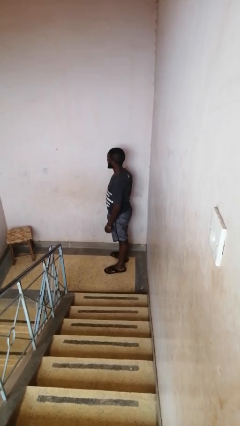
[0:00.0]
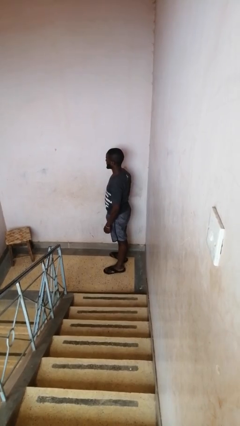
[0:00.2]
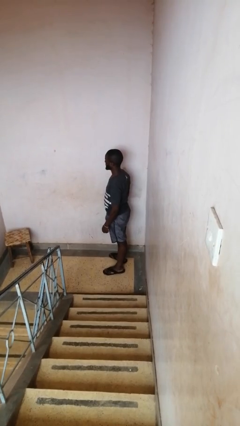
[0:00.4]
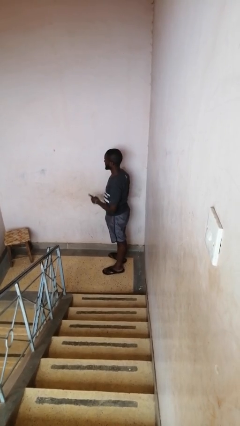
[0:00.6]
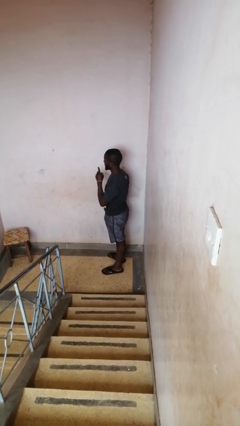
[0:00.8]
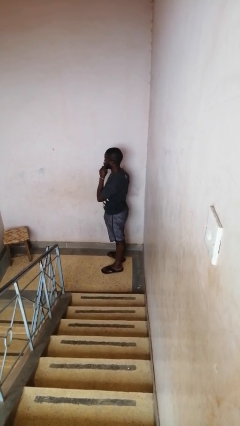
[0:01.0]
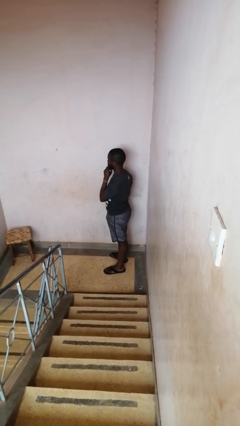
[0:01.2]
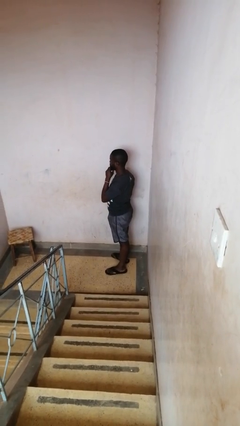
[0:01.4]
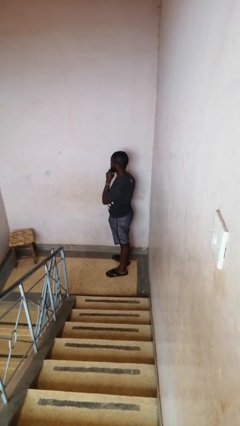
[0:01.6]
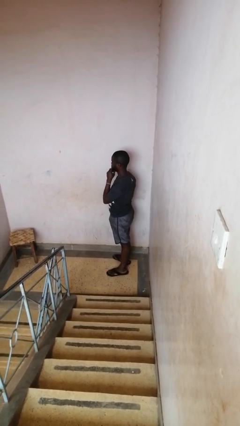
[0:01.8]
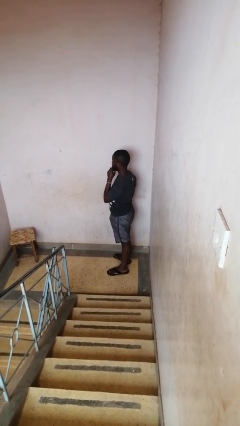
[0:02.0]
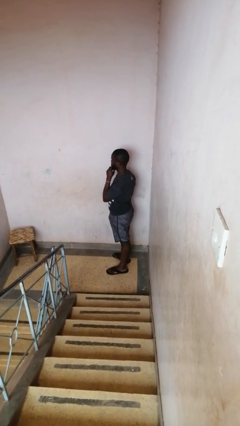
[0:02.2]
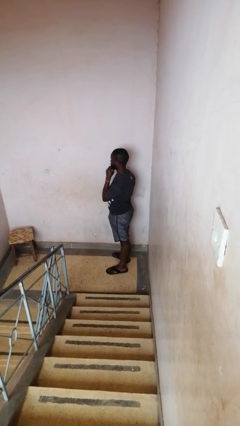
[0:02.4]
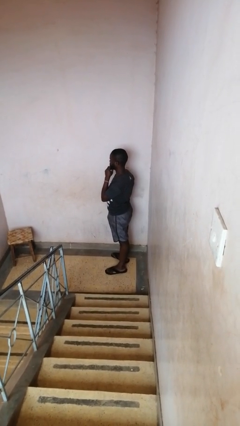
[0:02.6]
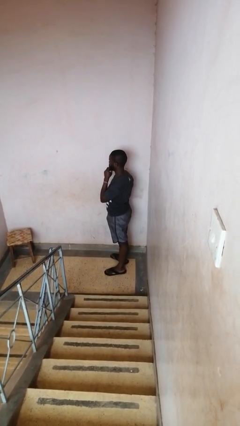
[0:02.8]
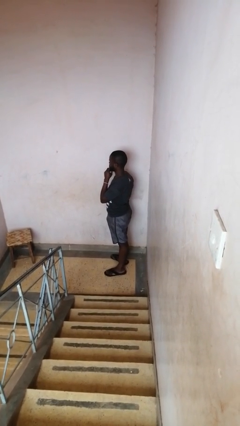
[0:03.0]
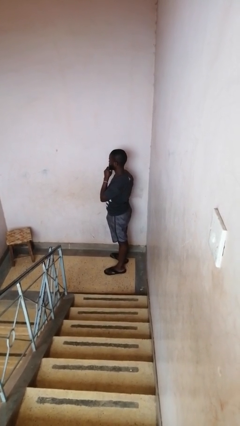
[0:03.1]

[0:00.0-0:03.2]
person gestures be quiet

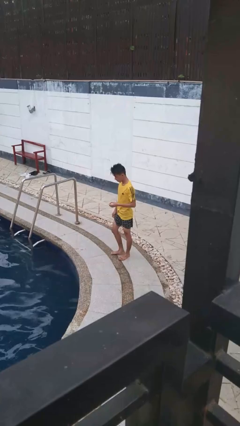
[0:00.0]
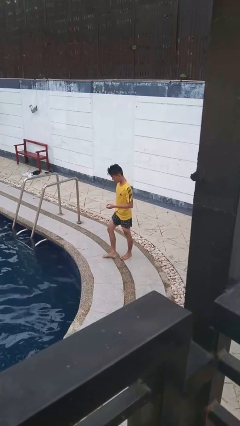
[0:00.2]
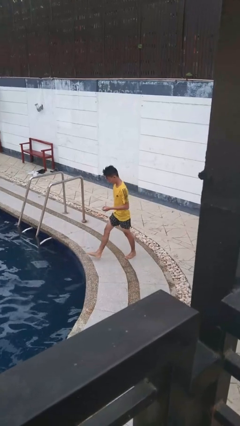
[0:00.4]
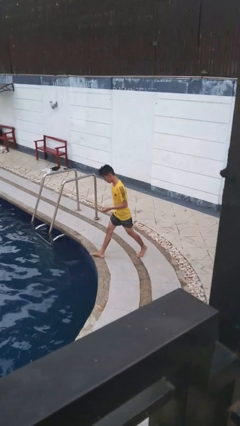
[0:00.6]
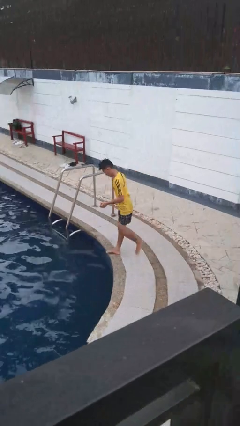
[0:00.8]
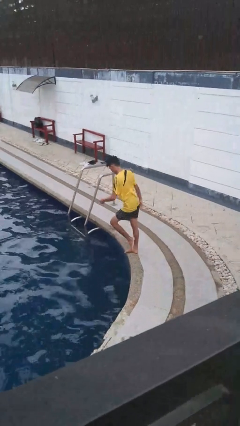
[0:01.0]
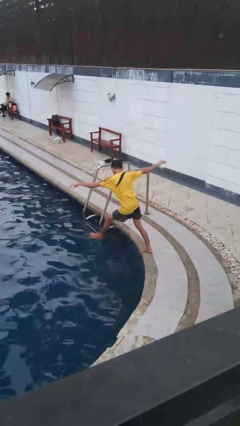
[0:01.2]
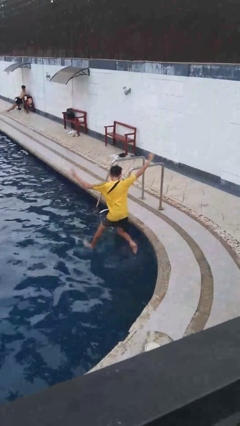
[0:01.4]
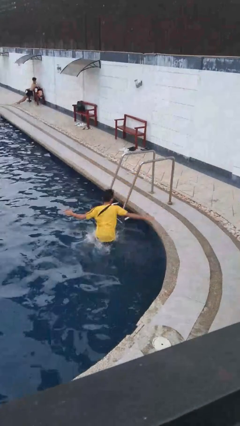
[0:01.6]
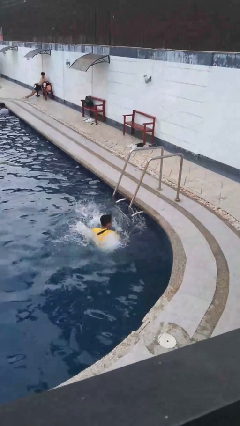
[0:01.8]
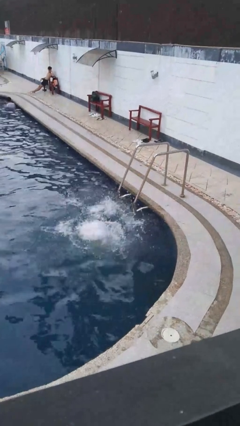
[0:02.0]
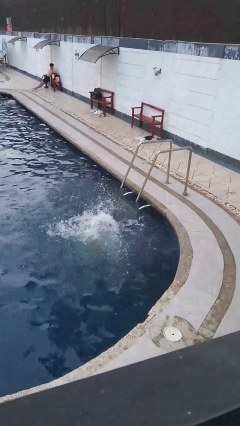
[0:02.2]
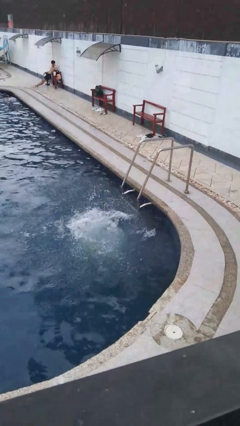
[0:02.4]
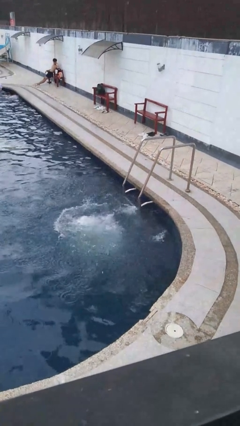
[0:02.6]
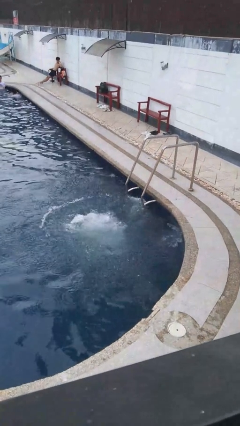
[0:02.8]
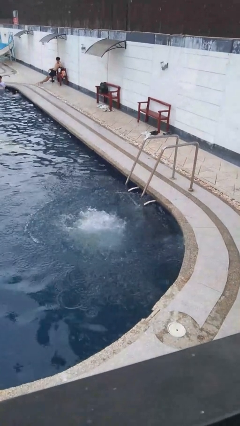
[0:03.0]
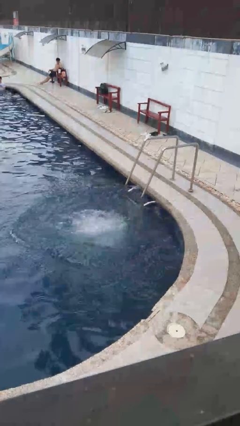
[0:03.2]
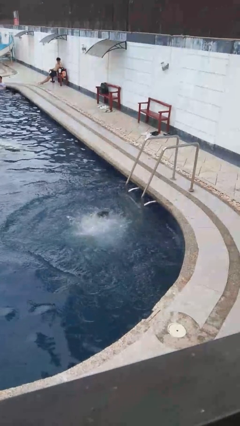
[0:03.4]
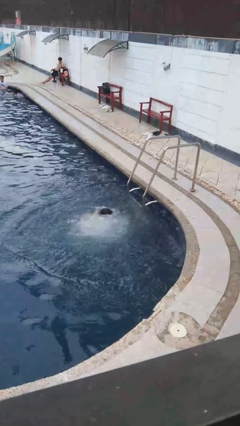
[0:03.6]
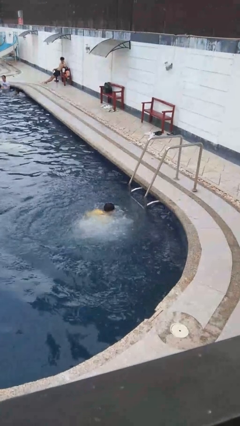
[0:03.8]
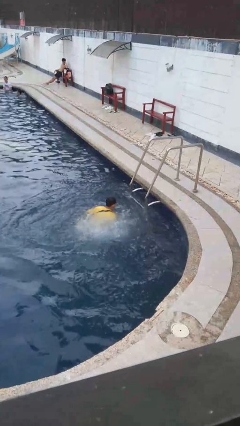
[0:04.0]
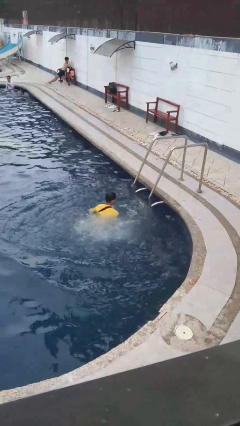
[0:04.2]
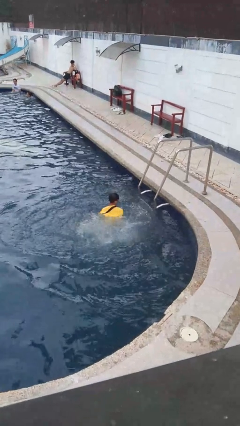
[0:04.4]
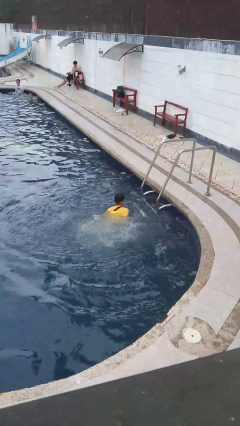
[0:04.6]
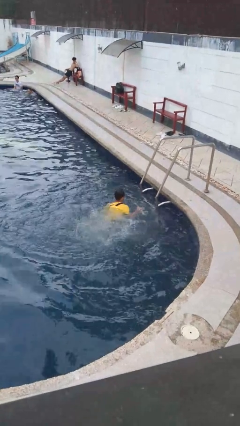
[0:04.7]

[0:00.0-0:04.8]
person falls into pool

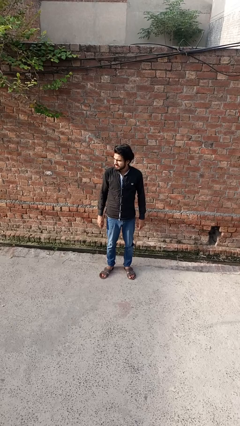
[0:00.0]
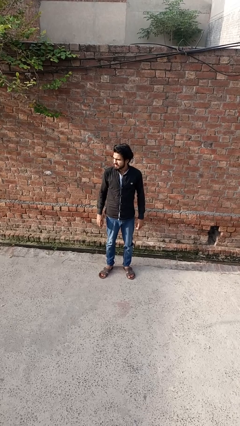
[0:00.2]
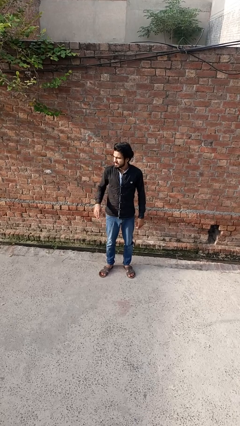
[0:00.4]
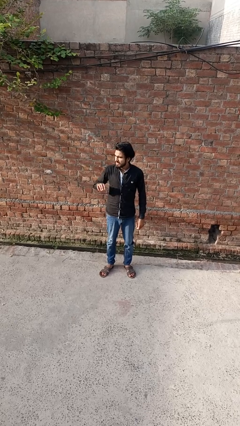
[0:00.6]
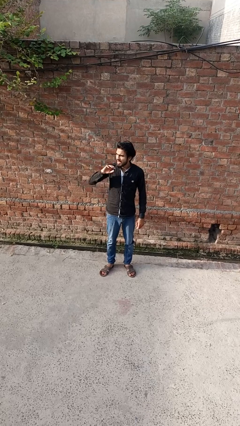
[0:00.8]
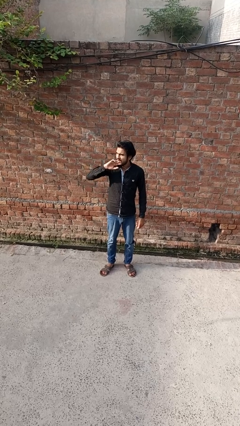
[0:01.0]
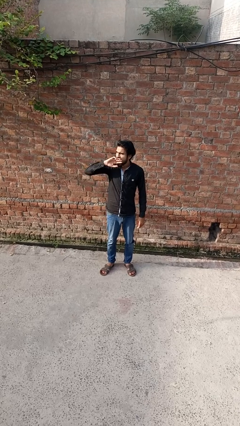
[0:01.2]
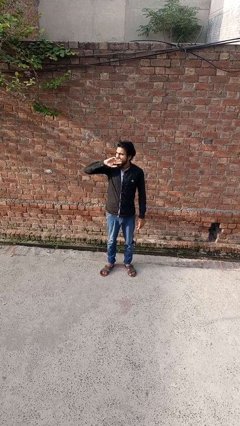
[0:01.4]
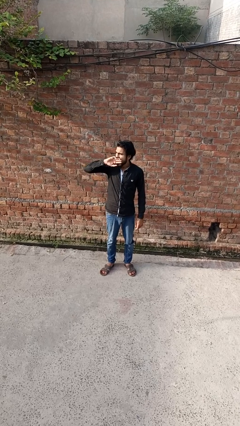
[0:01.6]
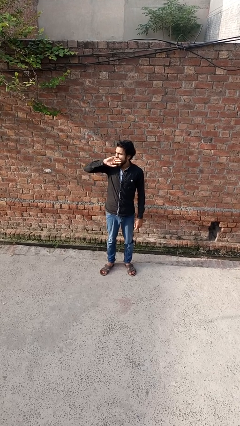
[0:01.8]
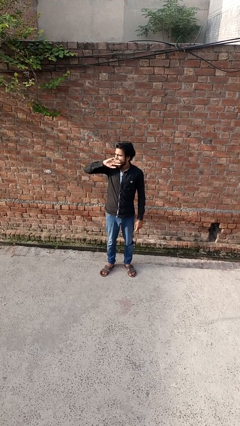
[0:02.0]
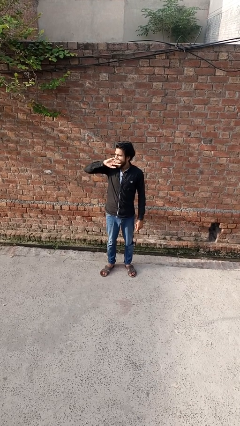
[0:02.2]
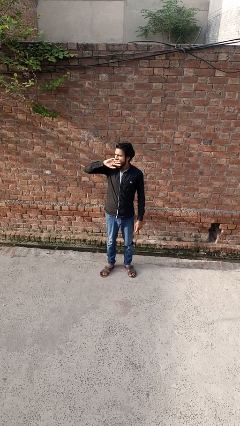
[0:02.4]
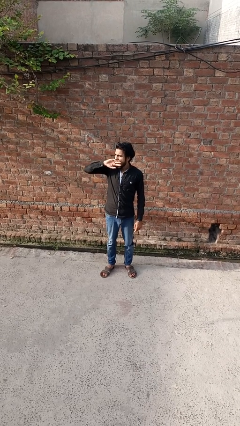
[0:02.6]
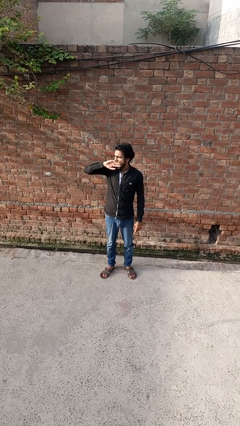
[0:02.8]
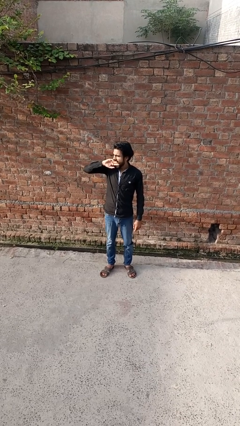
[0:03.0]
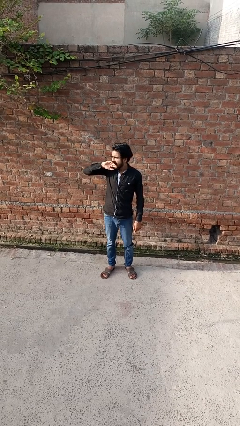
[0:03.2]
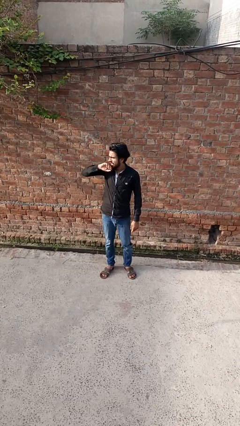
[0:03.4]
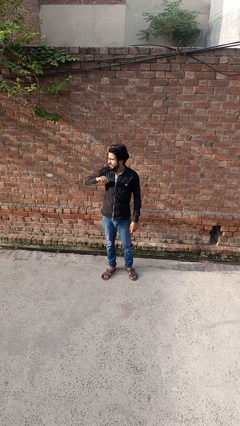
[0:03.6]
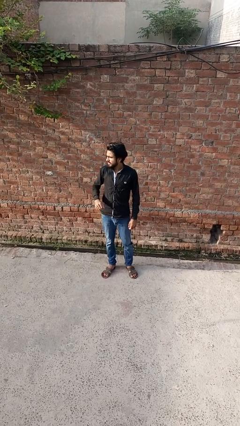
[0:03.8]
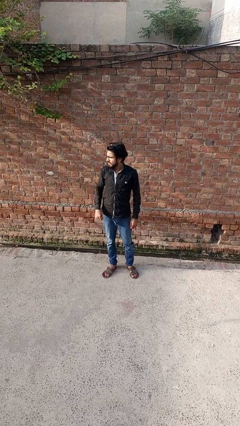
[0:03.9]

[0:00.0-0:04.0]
person yawns

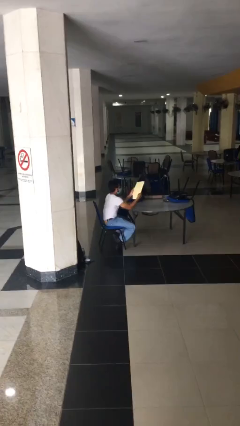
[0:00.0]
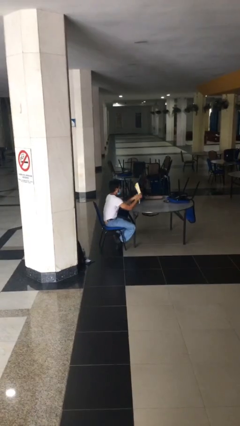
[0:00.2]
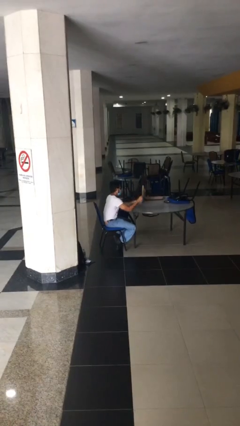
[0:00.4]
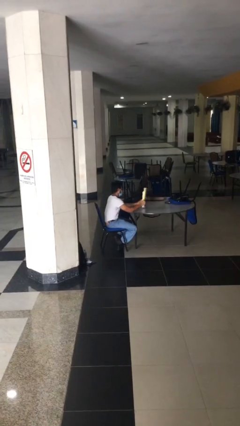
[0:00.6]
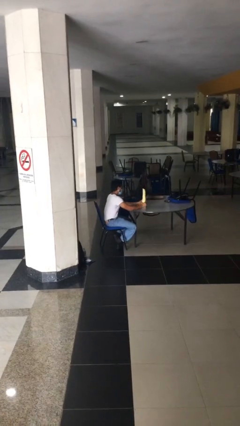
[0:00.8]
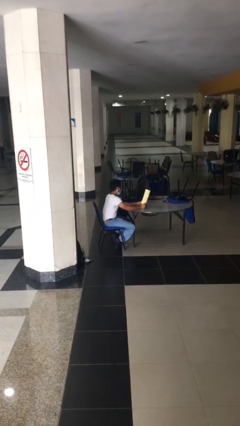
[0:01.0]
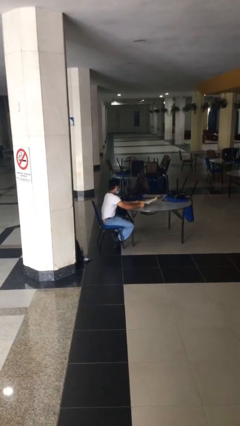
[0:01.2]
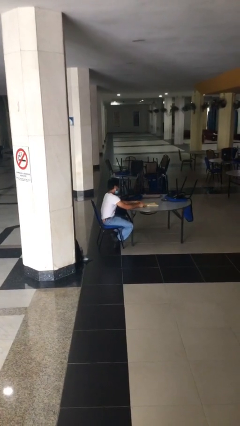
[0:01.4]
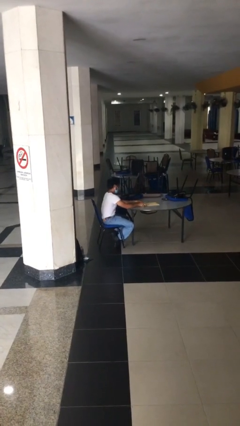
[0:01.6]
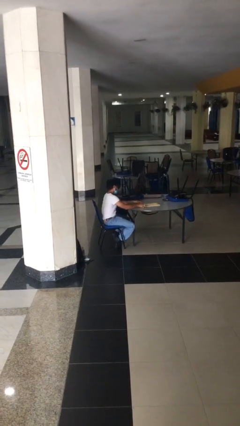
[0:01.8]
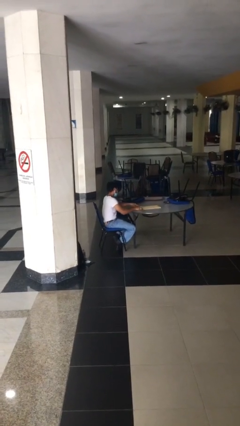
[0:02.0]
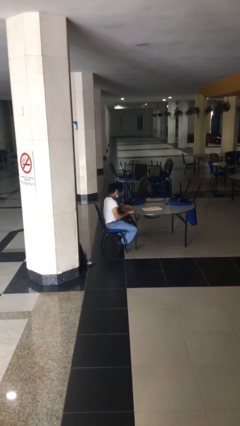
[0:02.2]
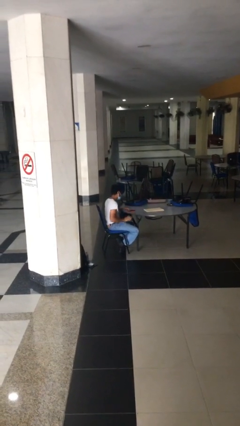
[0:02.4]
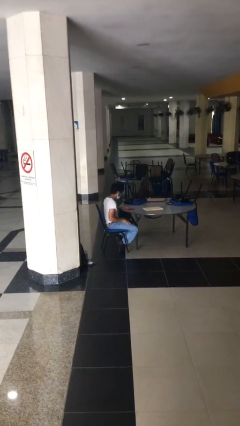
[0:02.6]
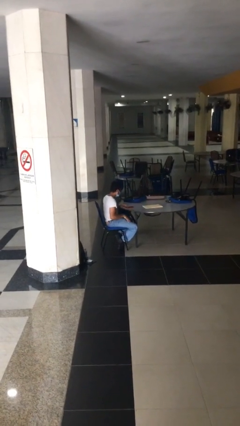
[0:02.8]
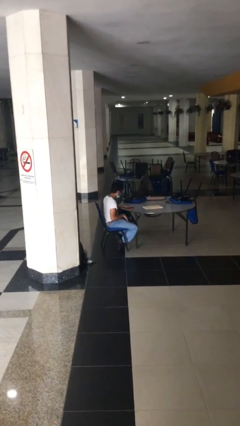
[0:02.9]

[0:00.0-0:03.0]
person puts down object on table

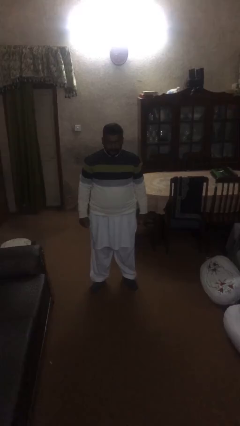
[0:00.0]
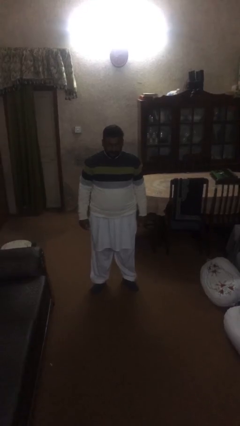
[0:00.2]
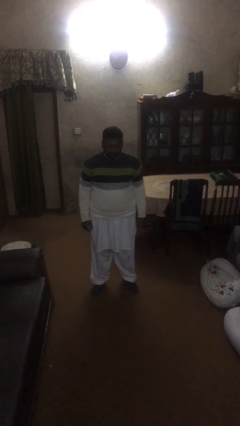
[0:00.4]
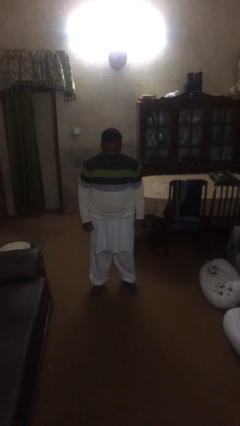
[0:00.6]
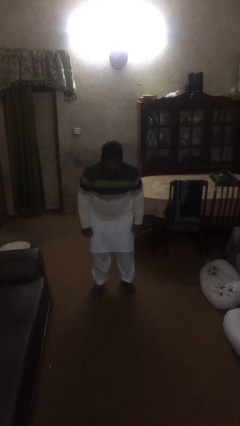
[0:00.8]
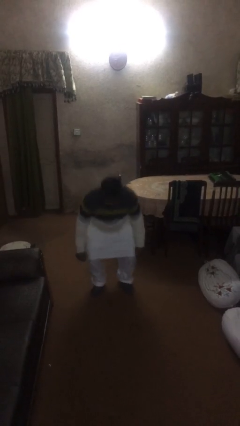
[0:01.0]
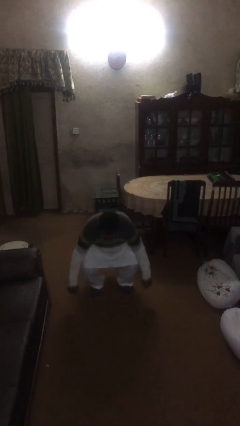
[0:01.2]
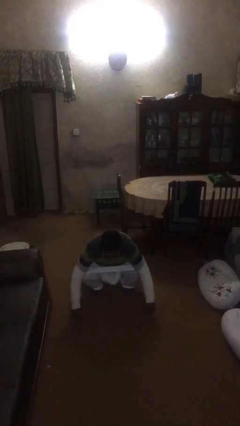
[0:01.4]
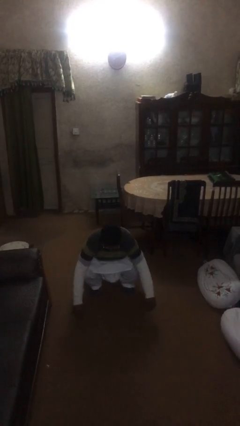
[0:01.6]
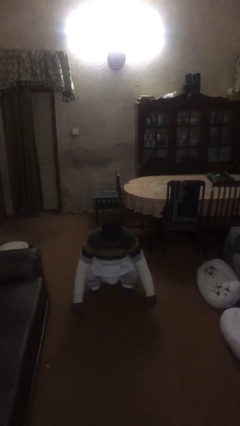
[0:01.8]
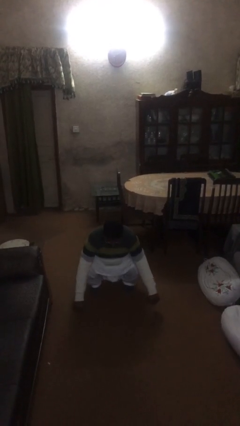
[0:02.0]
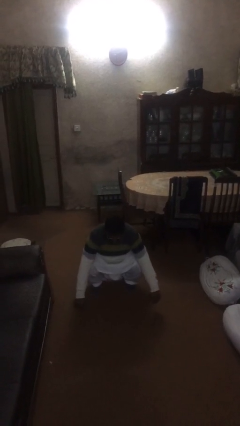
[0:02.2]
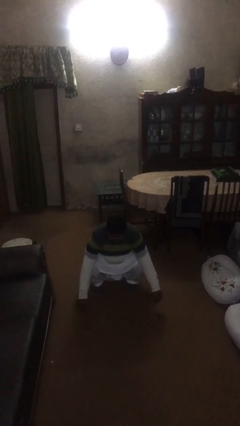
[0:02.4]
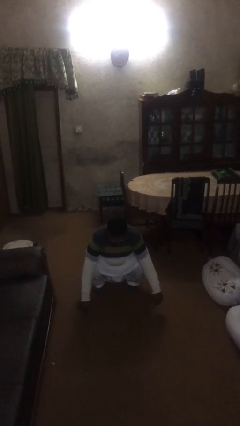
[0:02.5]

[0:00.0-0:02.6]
person sits down
